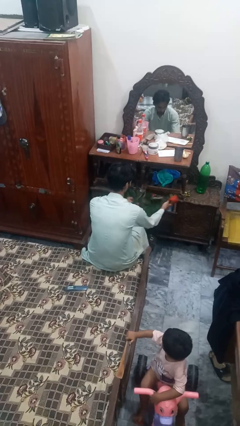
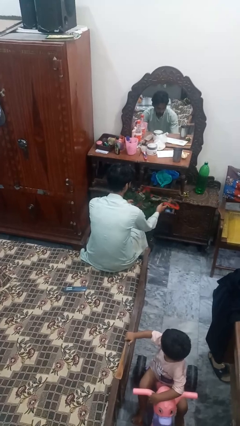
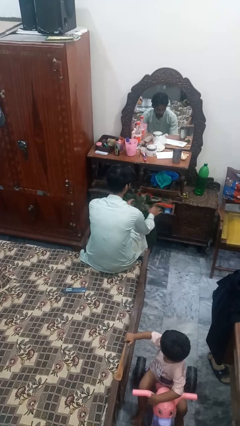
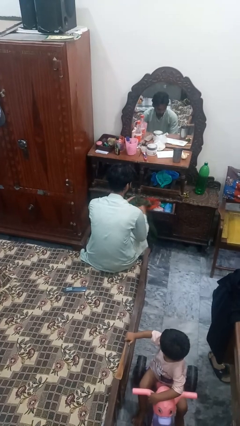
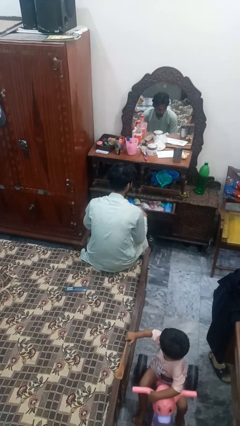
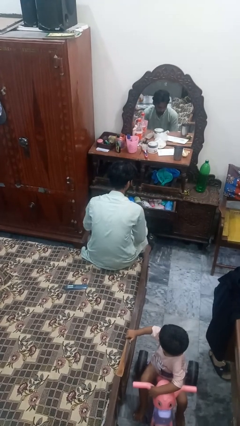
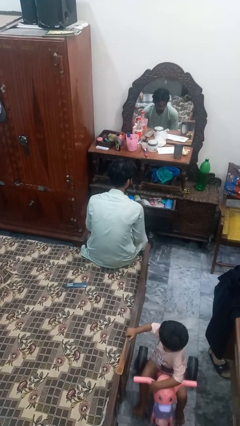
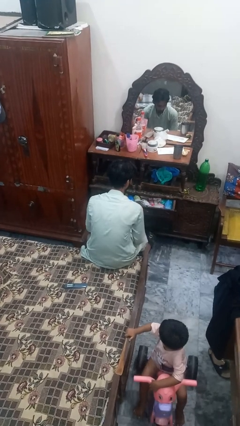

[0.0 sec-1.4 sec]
person takes clothes from dresser

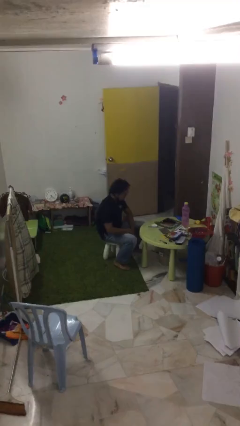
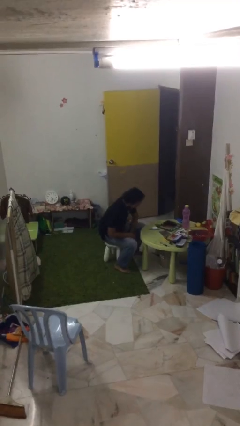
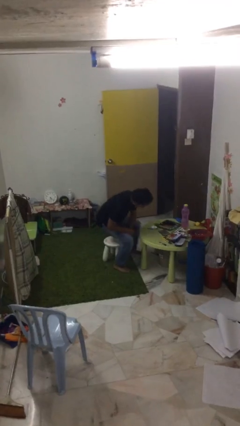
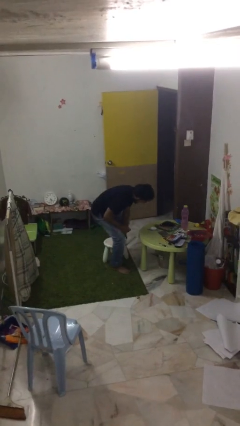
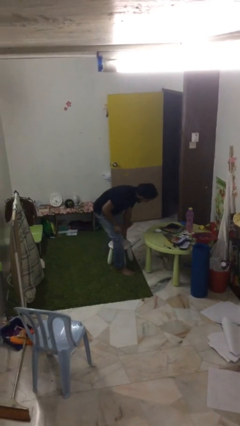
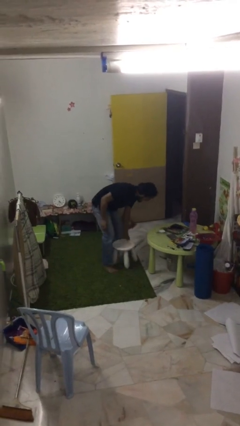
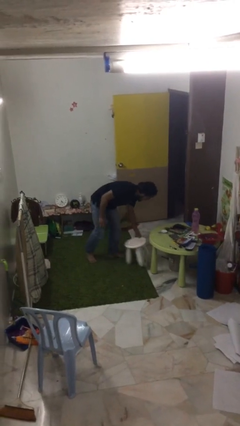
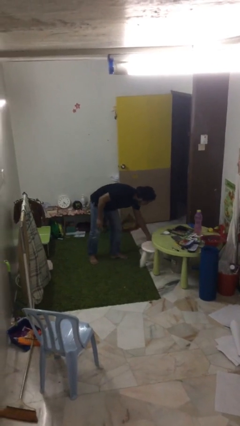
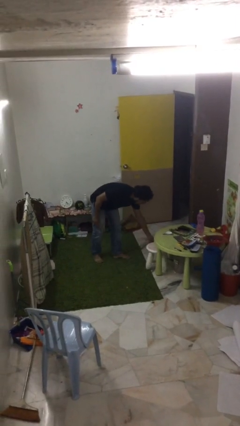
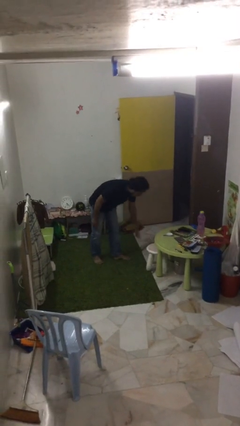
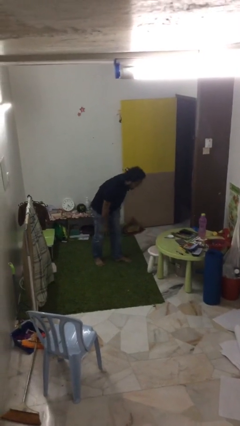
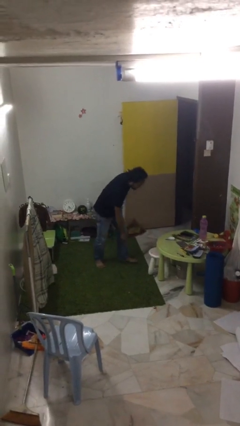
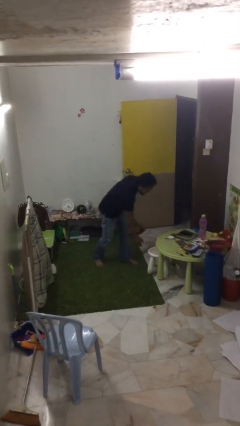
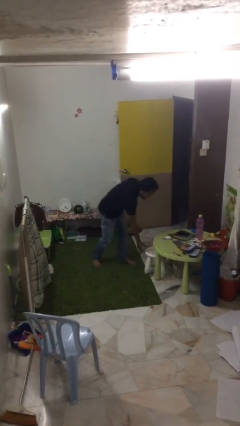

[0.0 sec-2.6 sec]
person stands up

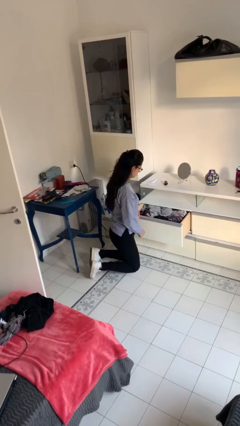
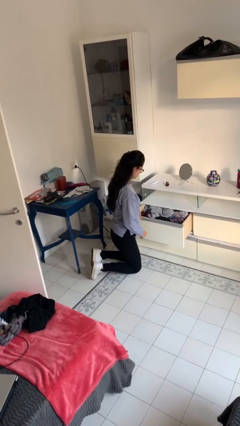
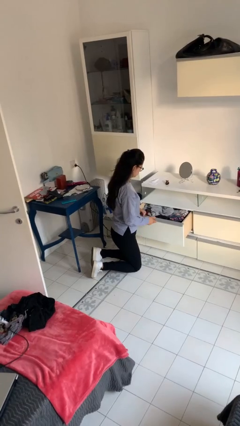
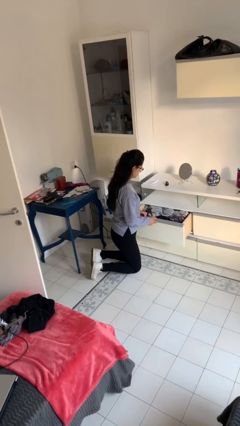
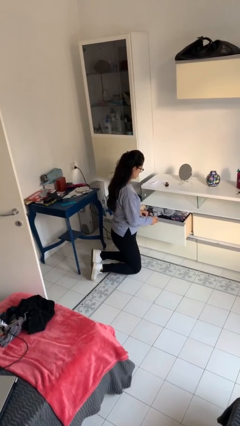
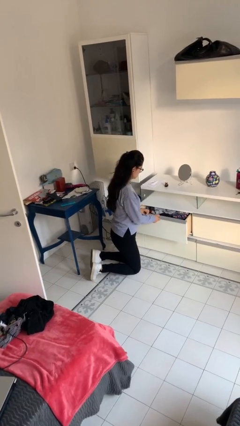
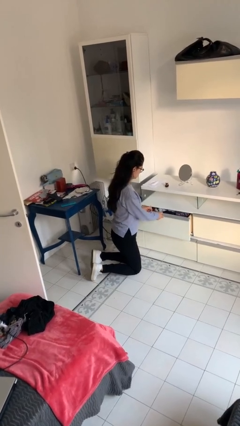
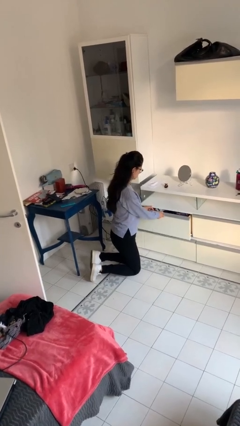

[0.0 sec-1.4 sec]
person closes dresser drawer

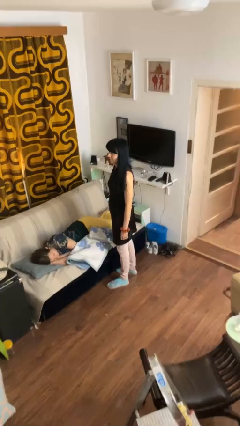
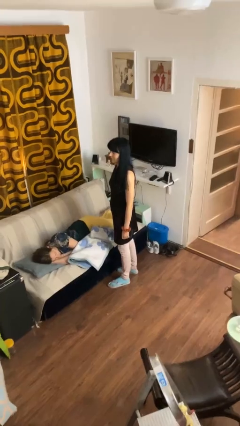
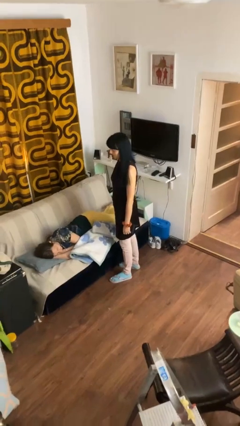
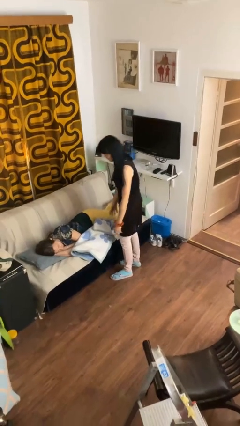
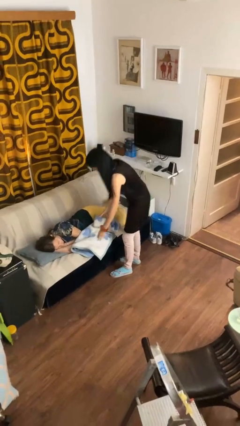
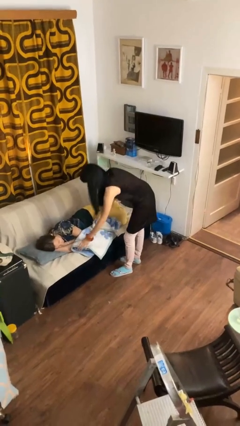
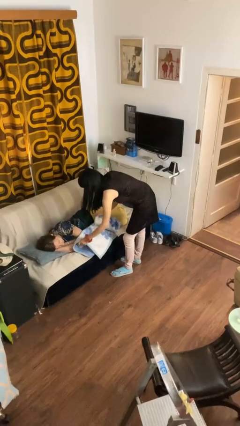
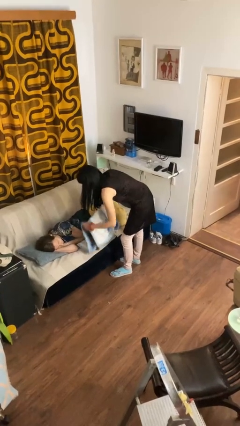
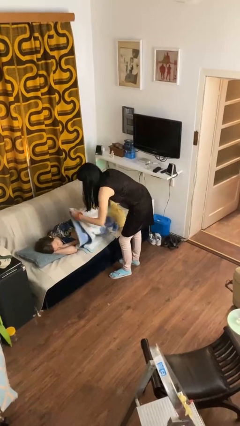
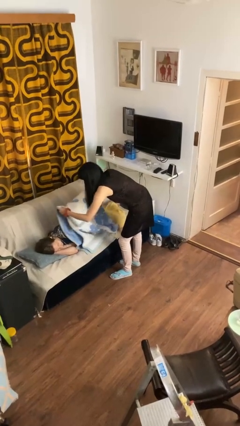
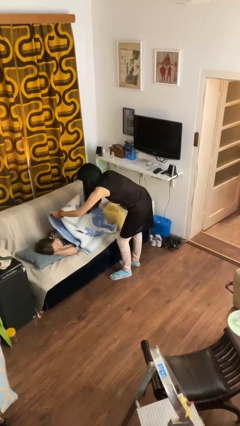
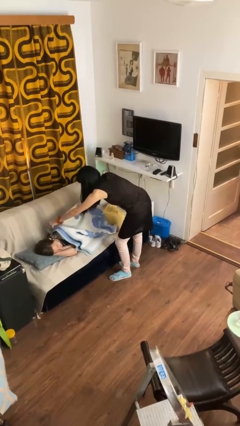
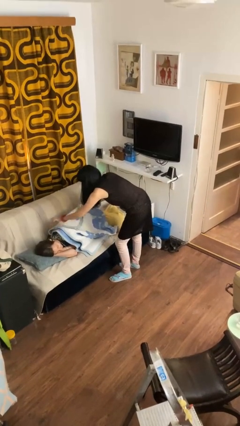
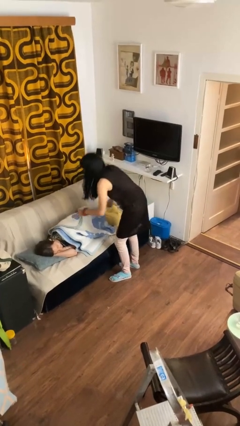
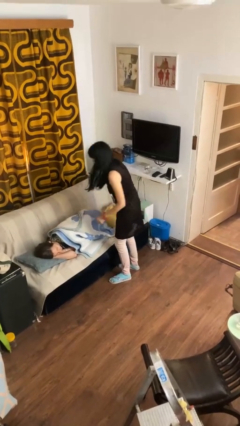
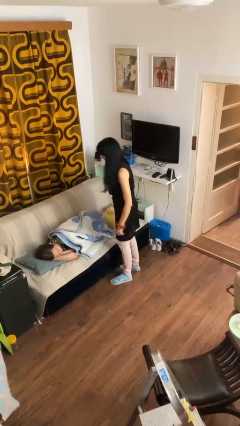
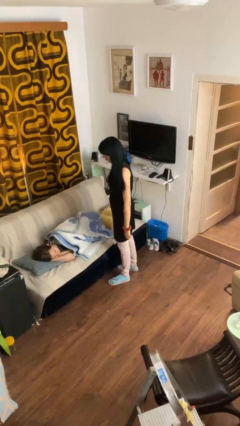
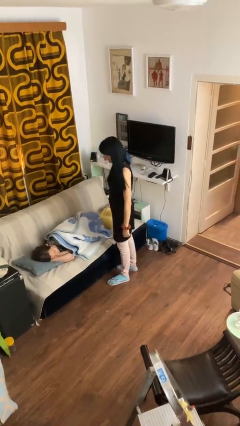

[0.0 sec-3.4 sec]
person covers friend with blanket

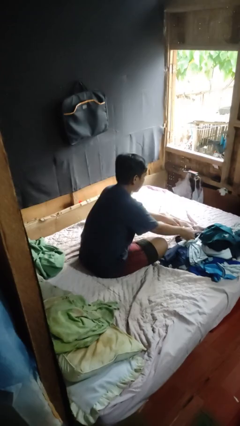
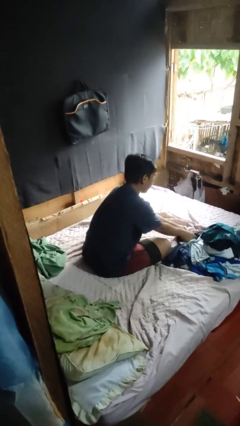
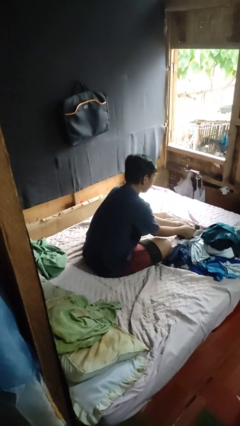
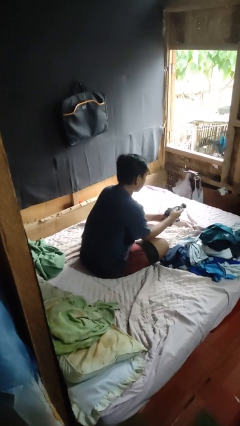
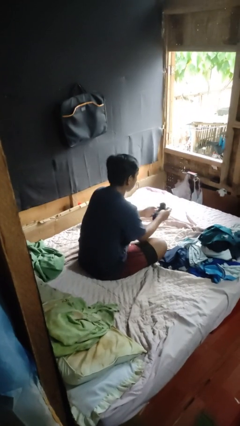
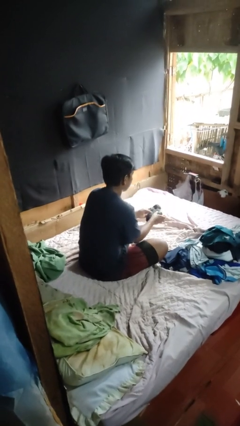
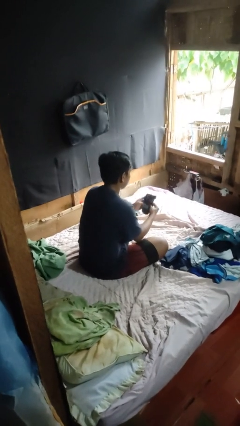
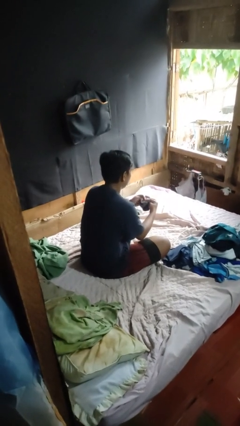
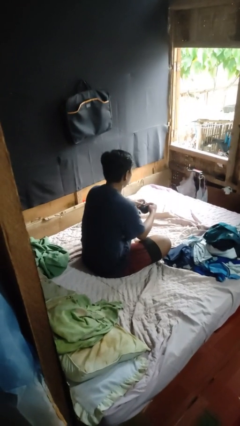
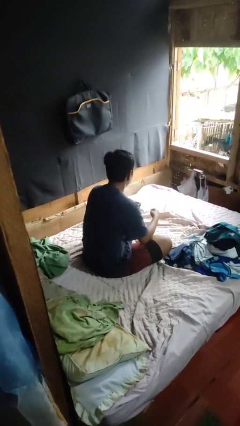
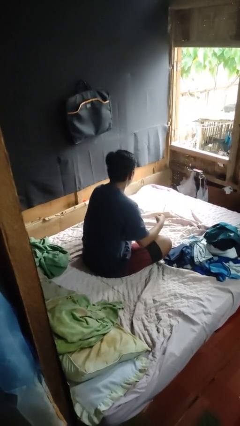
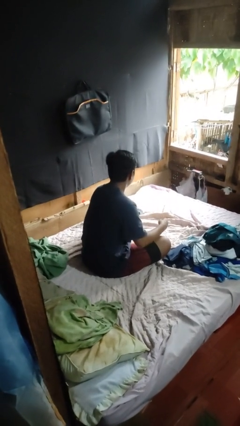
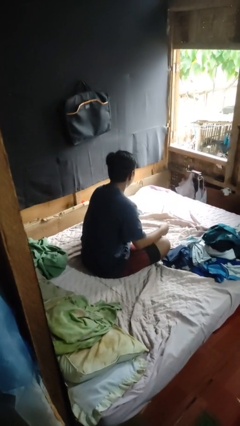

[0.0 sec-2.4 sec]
person folds socks

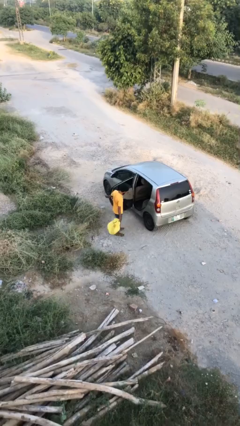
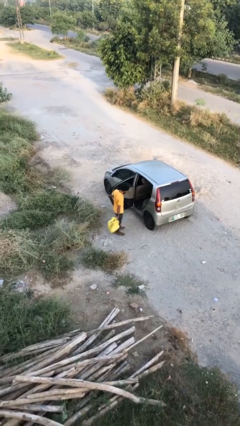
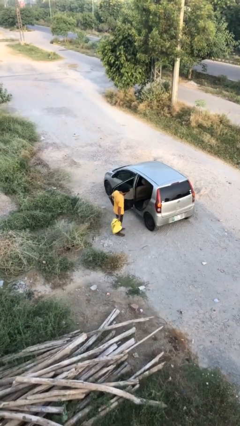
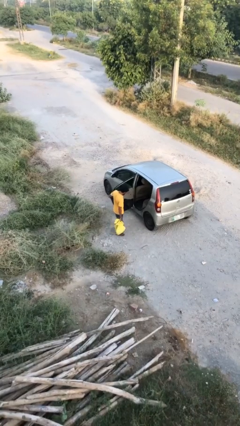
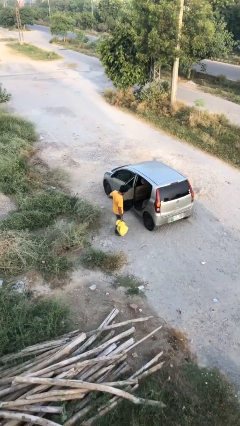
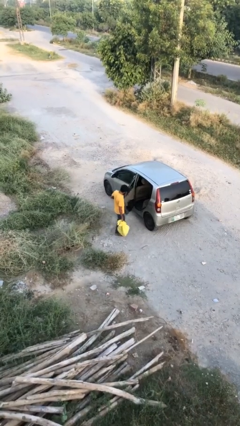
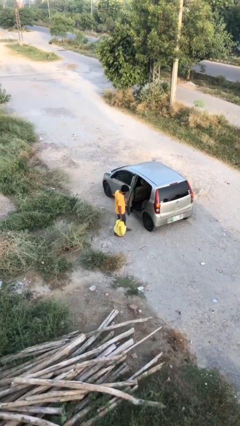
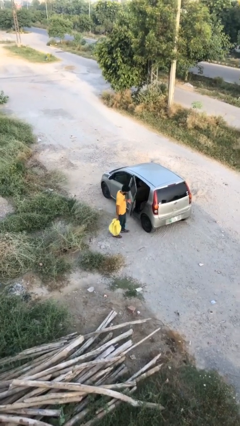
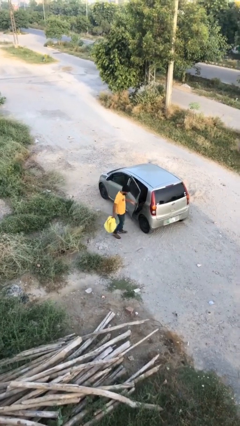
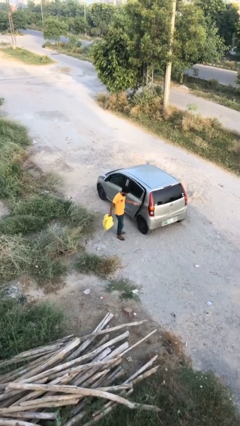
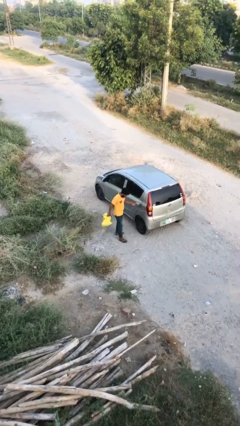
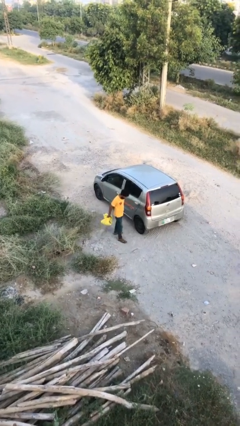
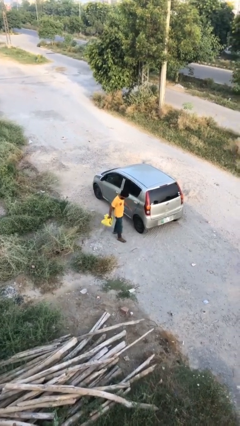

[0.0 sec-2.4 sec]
person closes car door

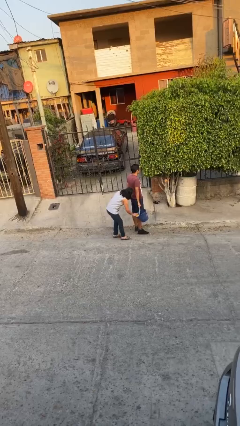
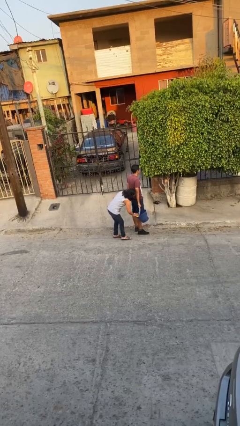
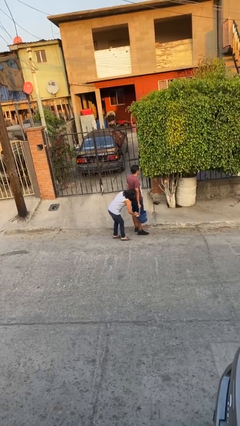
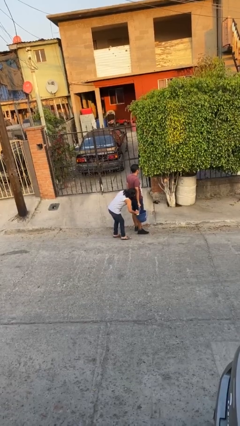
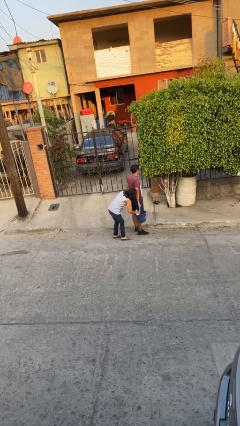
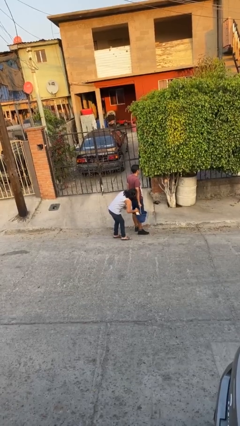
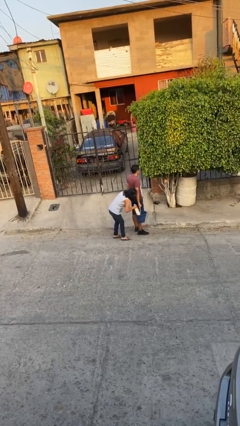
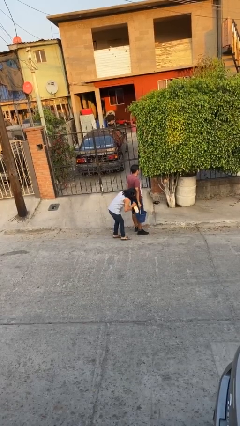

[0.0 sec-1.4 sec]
person steals object from person

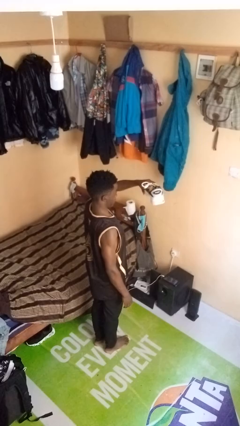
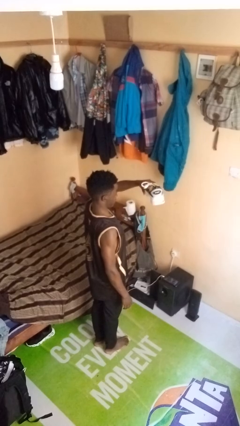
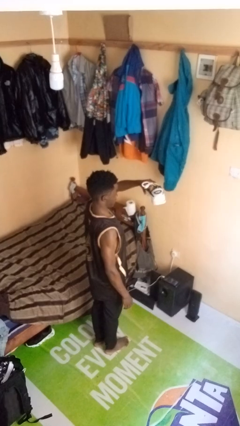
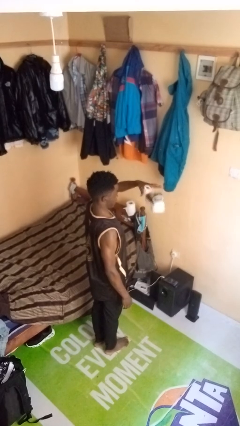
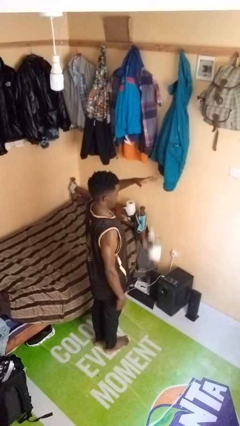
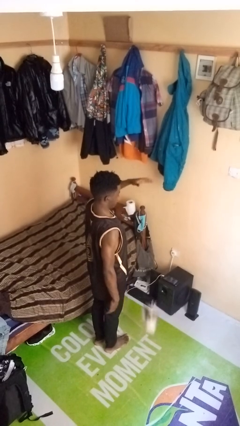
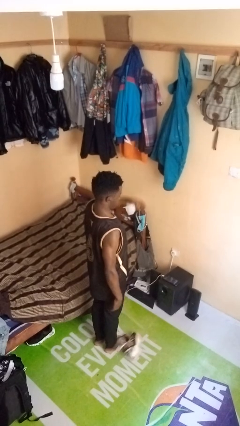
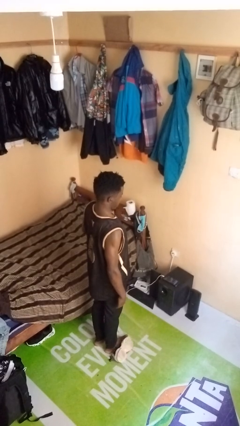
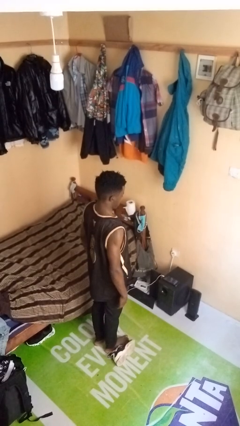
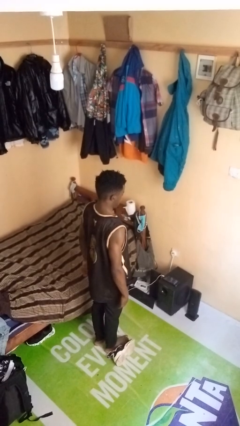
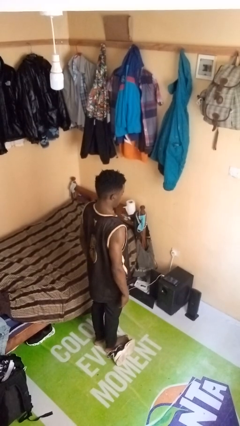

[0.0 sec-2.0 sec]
person drops object
